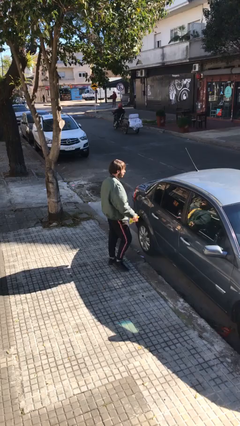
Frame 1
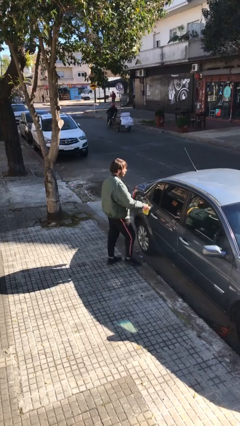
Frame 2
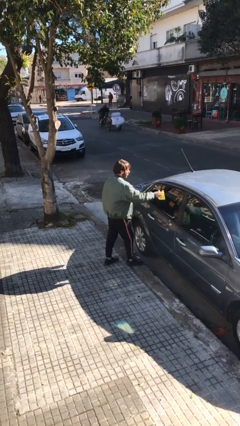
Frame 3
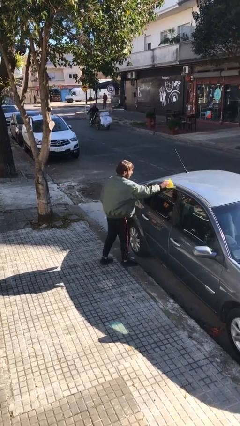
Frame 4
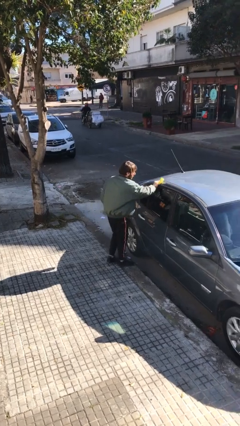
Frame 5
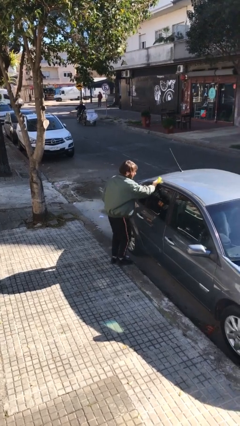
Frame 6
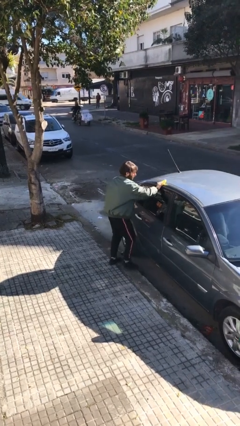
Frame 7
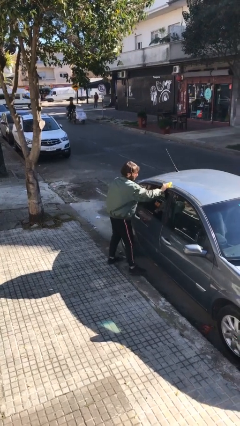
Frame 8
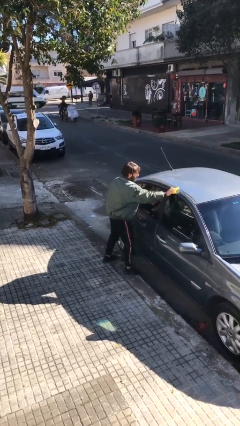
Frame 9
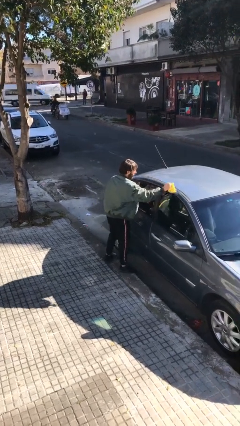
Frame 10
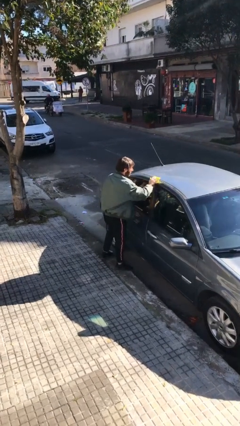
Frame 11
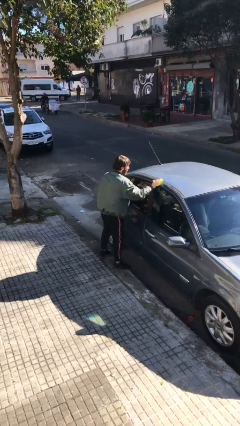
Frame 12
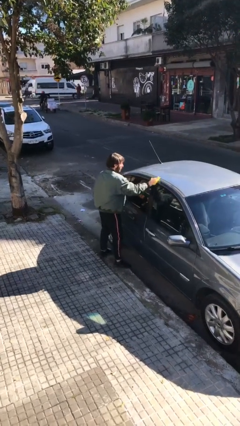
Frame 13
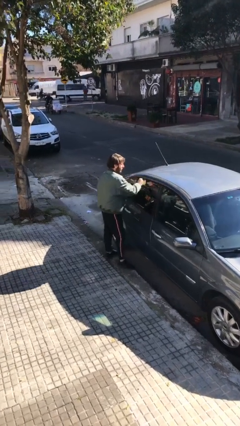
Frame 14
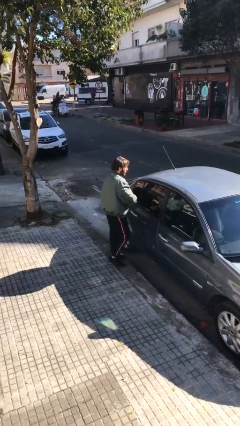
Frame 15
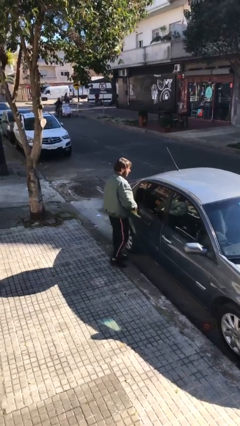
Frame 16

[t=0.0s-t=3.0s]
person polishes car with rag

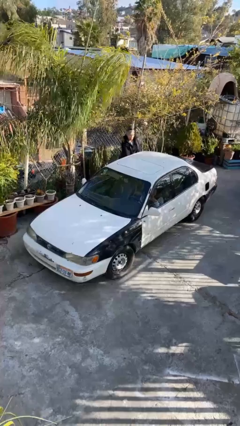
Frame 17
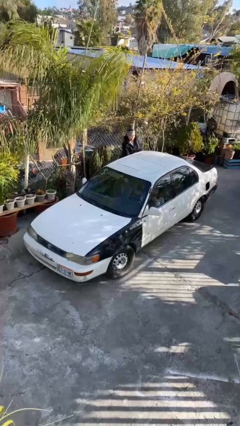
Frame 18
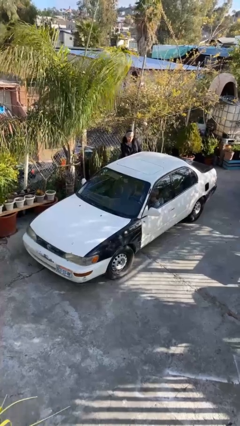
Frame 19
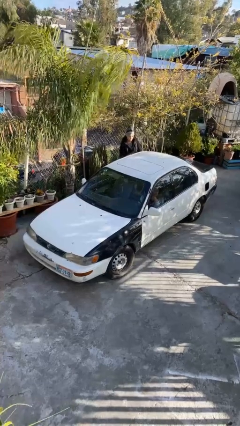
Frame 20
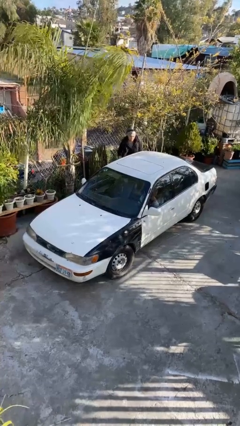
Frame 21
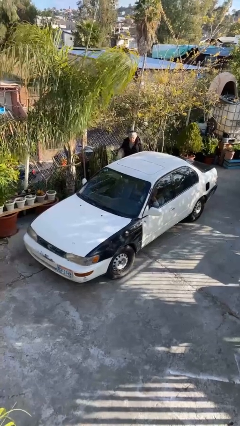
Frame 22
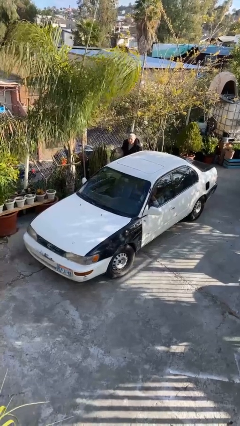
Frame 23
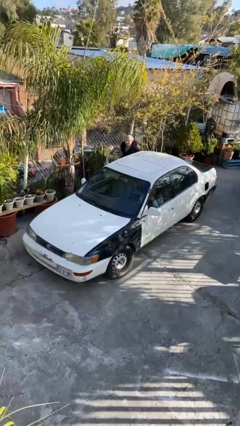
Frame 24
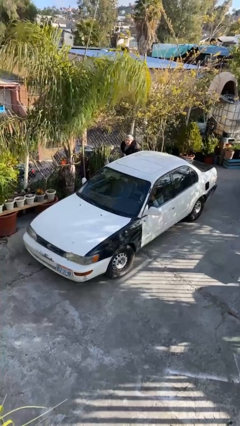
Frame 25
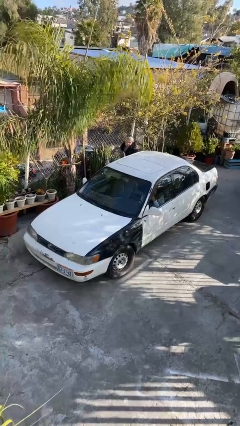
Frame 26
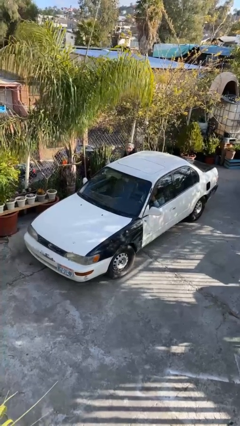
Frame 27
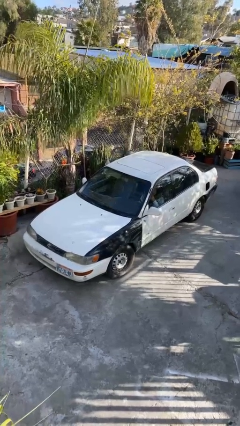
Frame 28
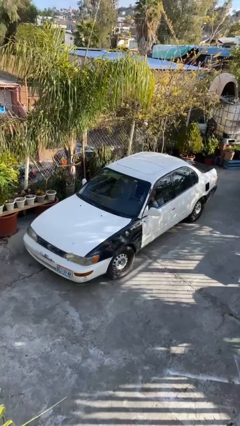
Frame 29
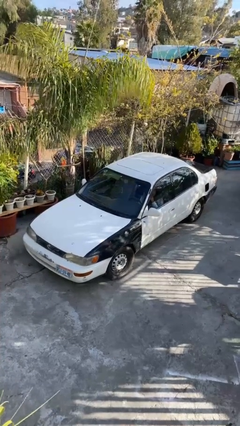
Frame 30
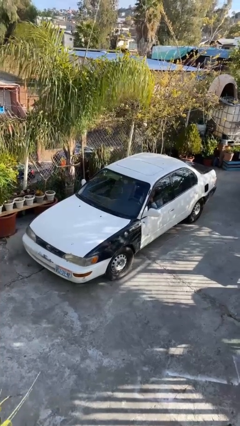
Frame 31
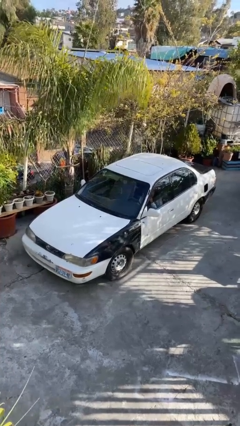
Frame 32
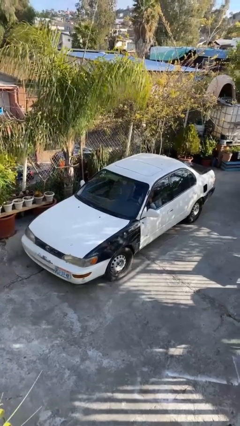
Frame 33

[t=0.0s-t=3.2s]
car picks up person

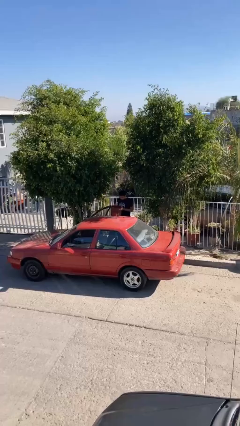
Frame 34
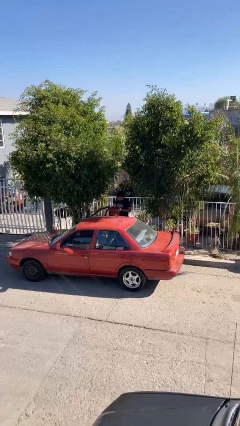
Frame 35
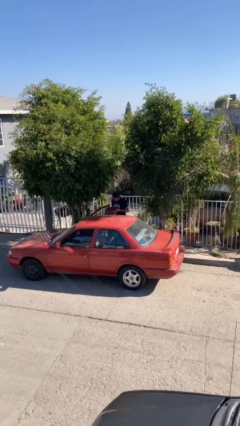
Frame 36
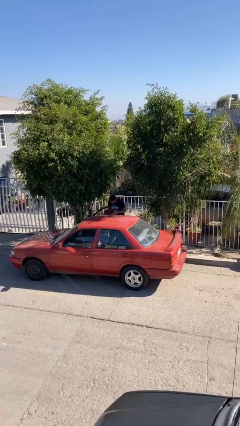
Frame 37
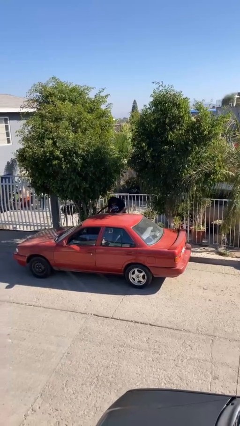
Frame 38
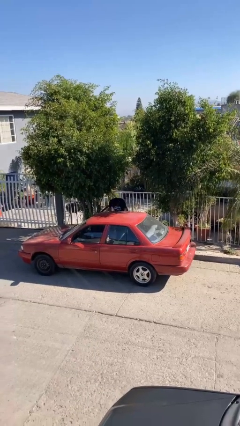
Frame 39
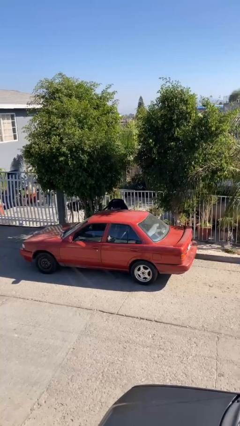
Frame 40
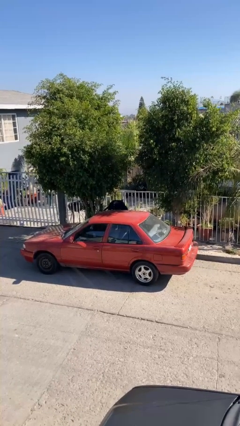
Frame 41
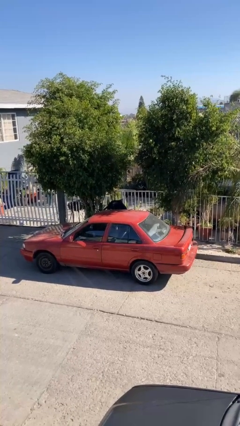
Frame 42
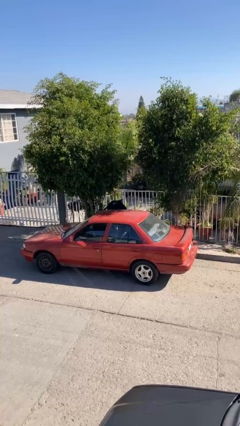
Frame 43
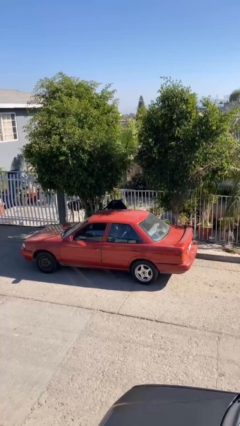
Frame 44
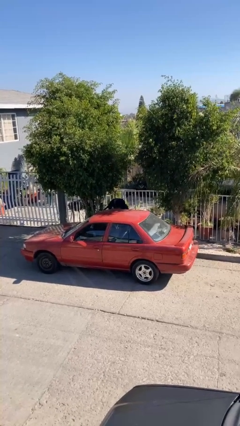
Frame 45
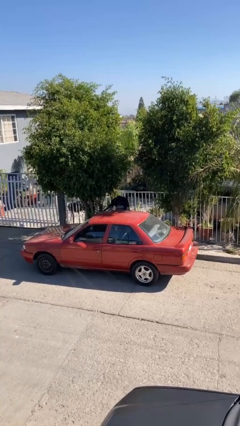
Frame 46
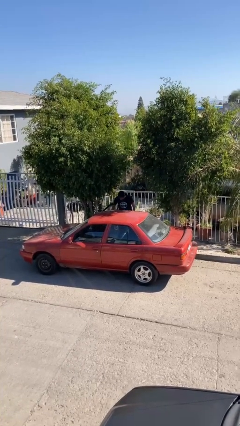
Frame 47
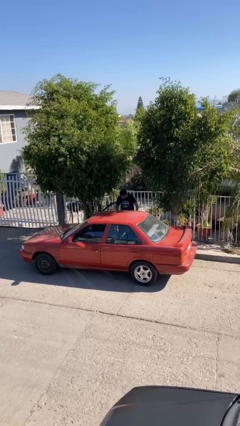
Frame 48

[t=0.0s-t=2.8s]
person loads car

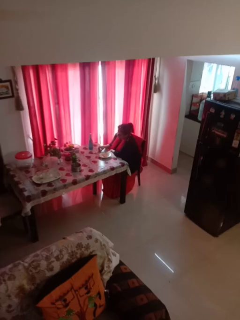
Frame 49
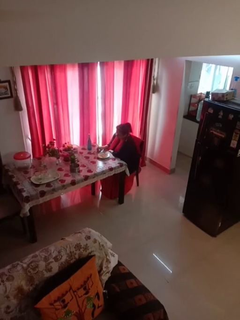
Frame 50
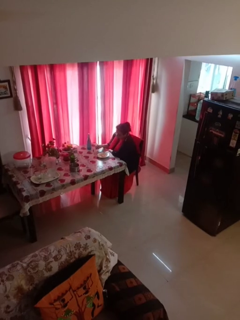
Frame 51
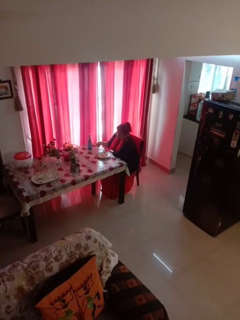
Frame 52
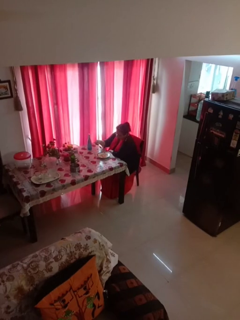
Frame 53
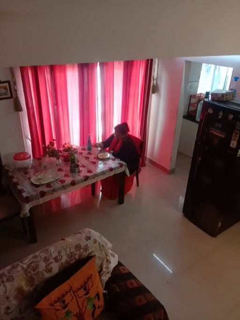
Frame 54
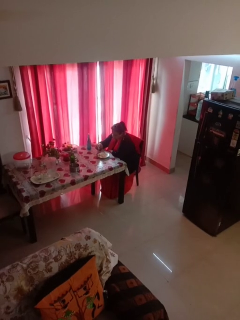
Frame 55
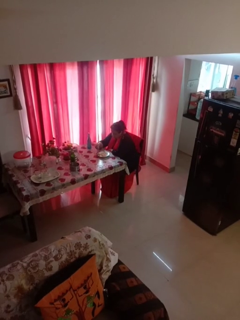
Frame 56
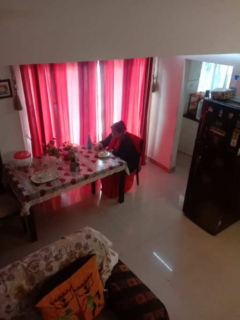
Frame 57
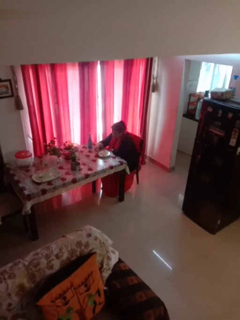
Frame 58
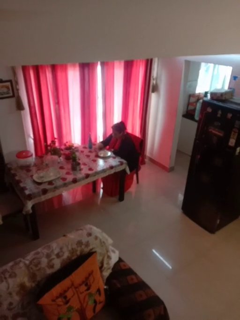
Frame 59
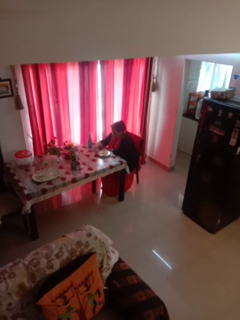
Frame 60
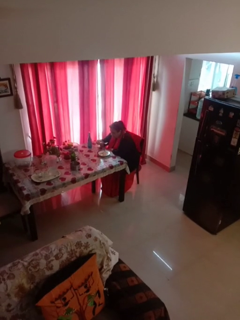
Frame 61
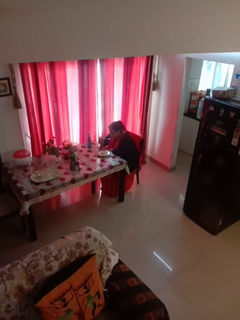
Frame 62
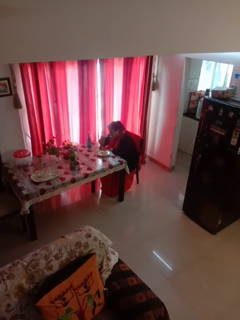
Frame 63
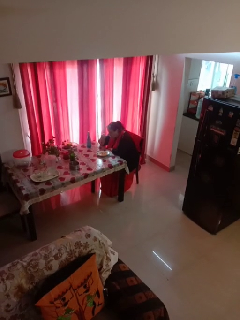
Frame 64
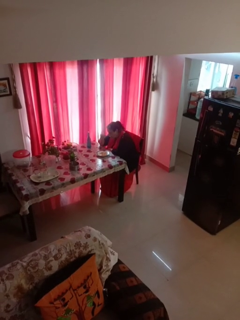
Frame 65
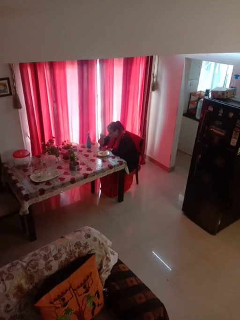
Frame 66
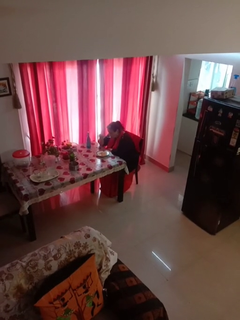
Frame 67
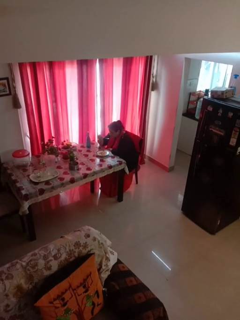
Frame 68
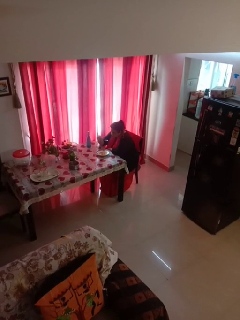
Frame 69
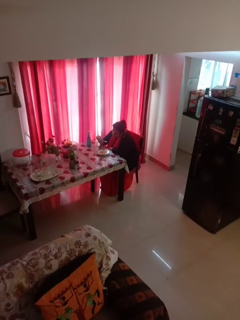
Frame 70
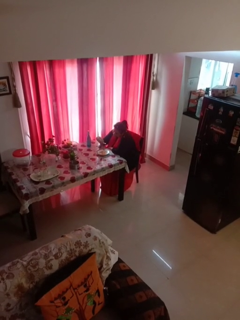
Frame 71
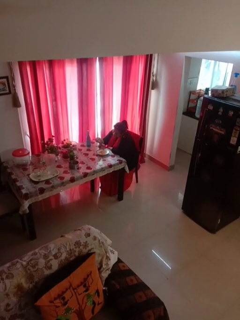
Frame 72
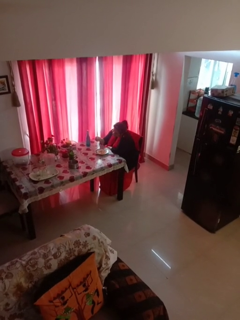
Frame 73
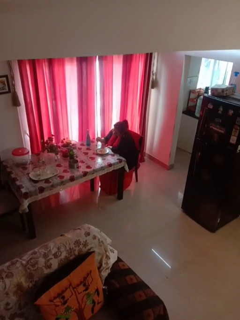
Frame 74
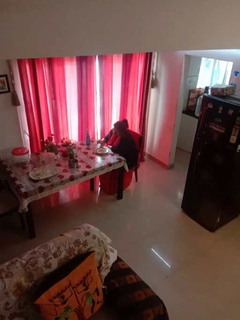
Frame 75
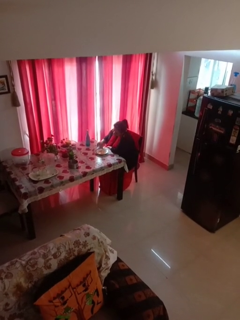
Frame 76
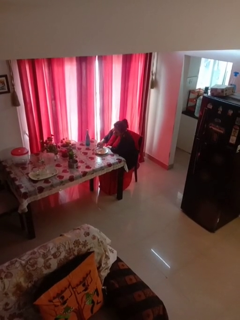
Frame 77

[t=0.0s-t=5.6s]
person eats with utensil

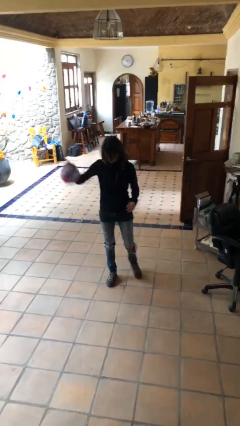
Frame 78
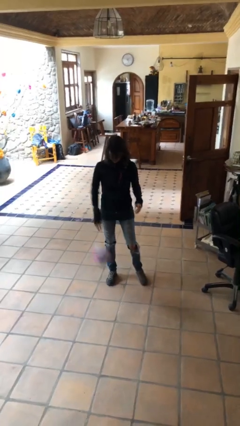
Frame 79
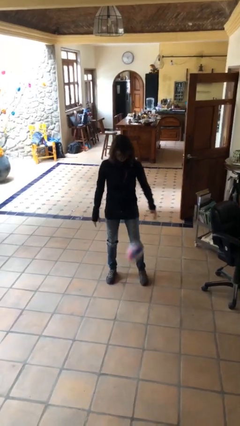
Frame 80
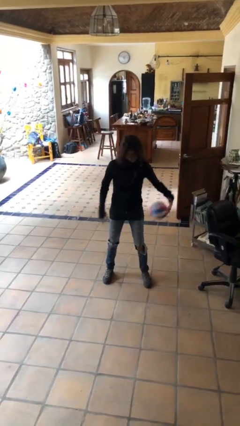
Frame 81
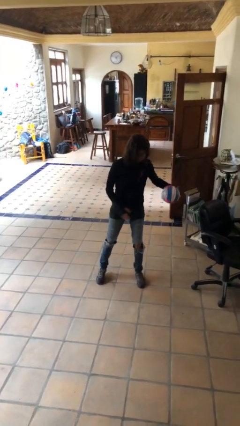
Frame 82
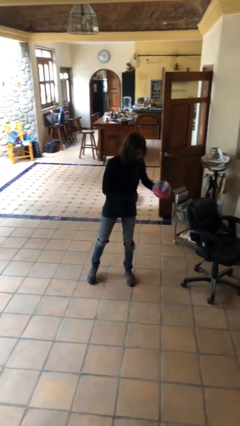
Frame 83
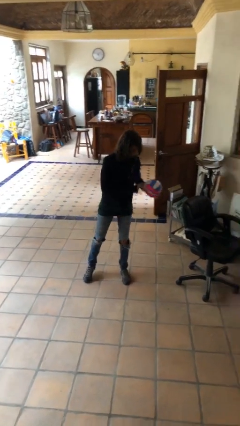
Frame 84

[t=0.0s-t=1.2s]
person bounces ball on floor

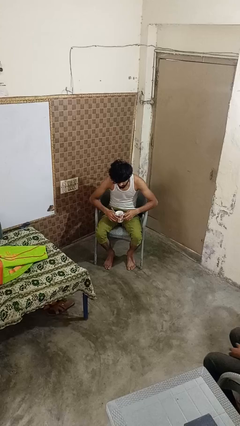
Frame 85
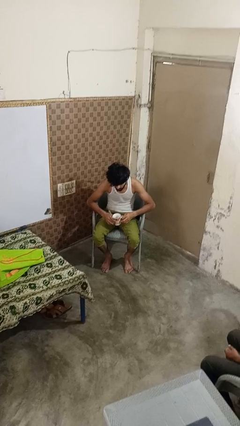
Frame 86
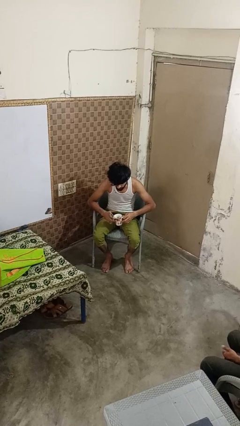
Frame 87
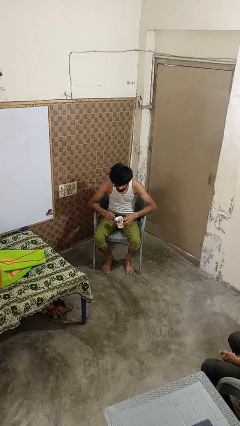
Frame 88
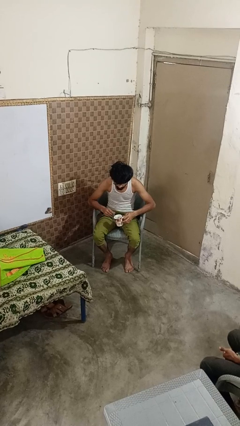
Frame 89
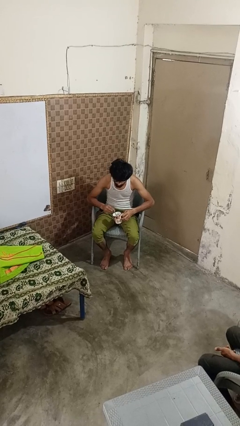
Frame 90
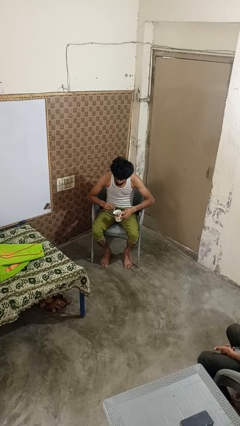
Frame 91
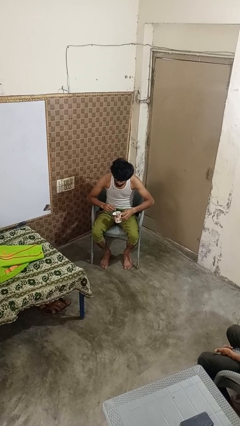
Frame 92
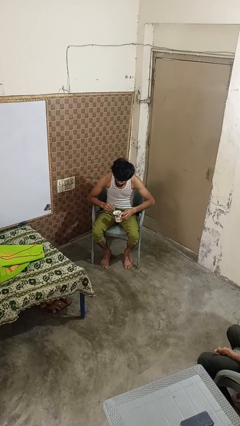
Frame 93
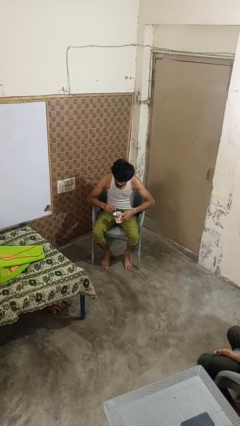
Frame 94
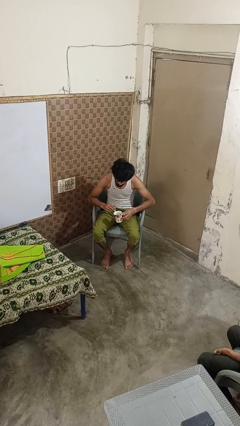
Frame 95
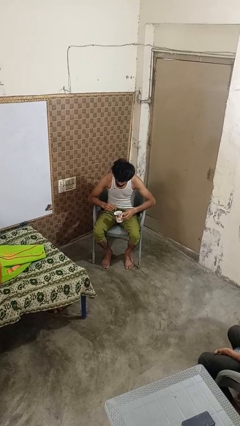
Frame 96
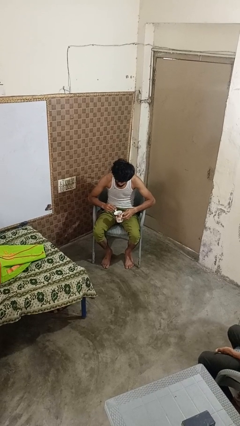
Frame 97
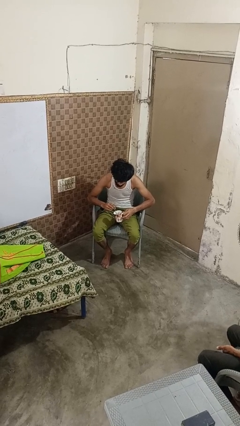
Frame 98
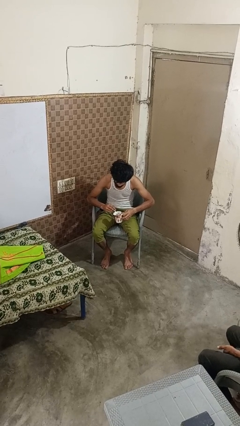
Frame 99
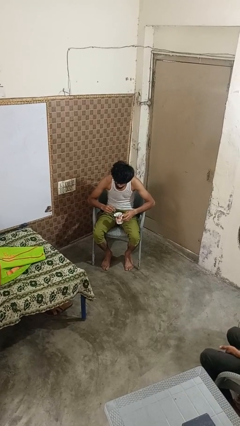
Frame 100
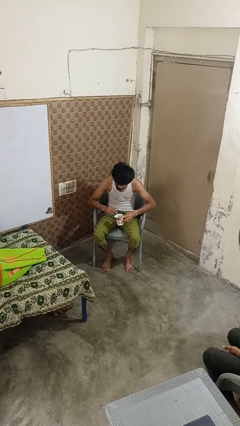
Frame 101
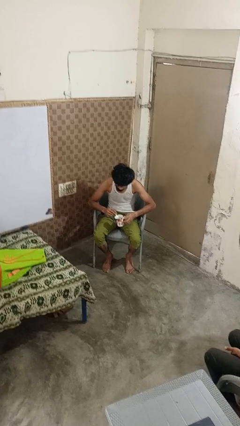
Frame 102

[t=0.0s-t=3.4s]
person stirs mug
